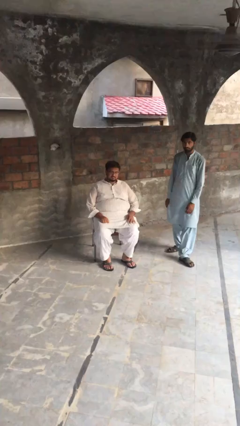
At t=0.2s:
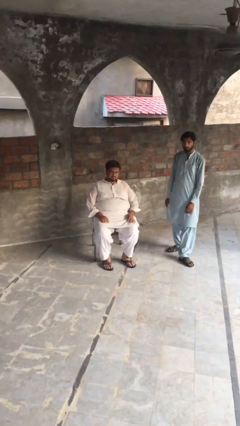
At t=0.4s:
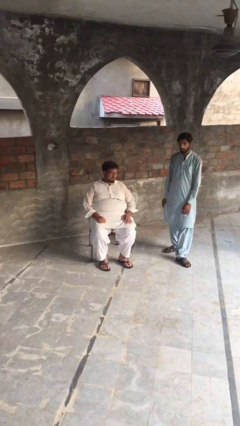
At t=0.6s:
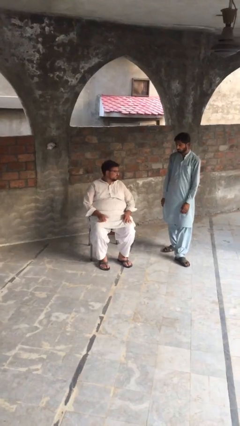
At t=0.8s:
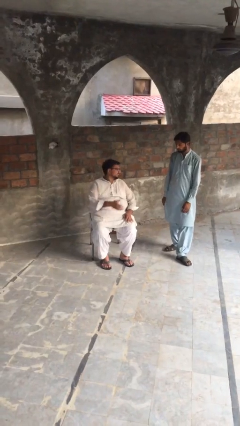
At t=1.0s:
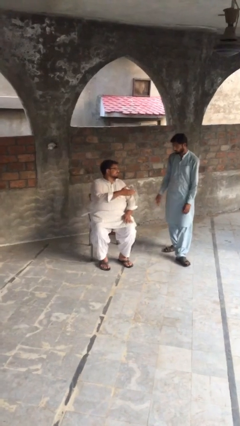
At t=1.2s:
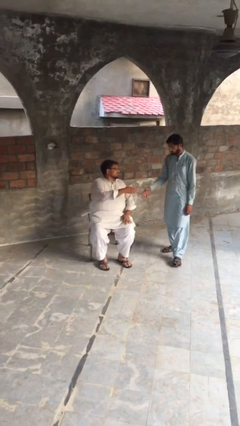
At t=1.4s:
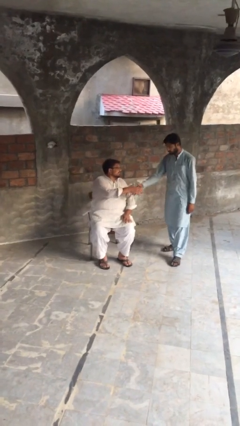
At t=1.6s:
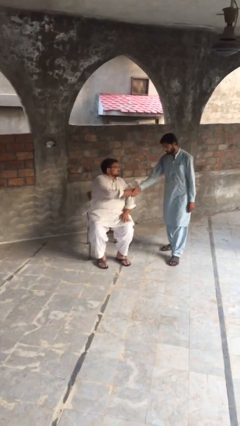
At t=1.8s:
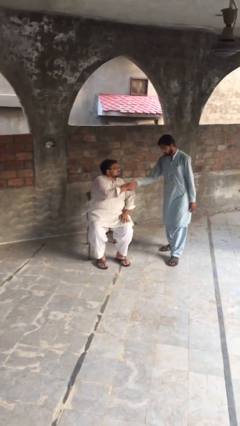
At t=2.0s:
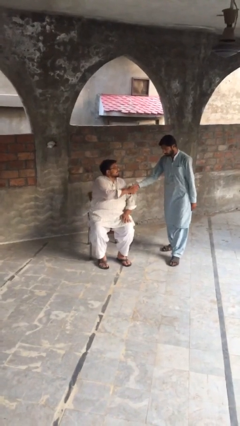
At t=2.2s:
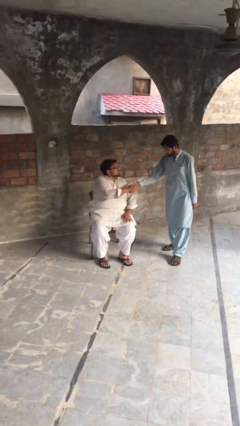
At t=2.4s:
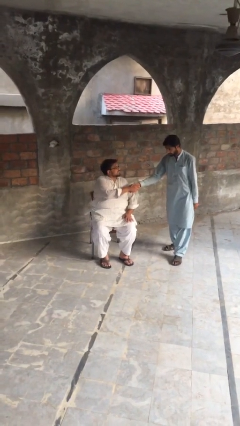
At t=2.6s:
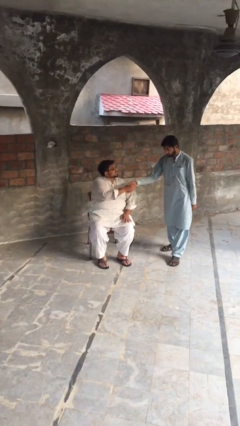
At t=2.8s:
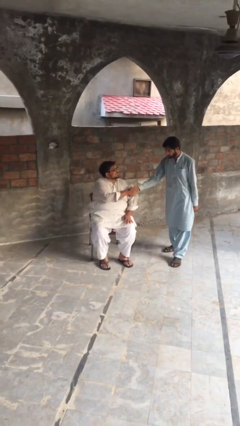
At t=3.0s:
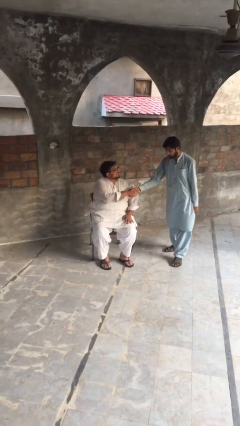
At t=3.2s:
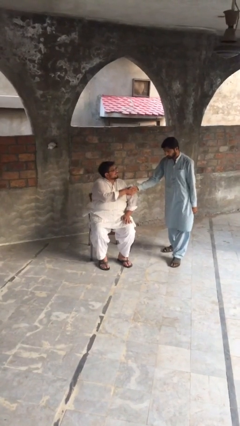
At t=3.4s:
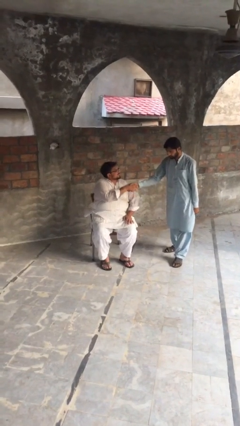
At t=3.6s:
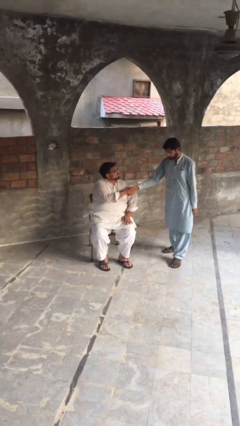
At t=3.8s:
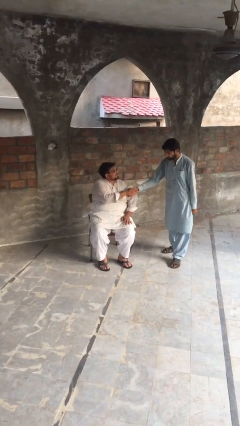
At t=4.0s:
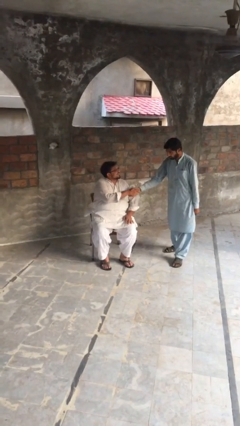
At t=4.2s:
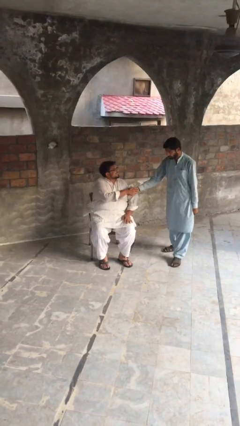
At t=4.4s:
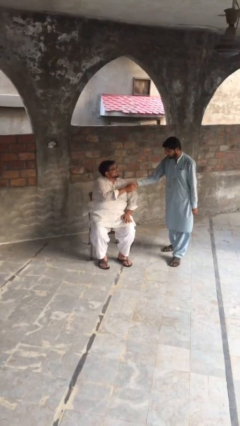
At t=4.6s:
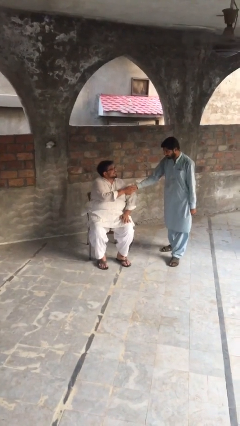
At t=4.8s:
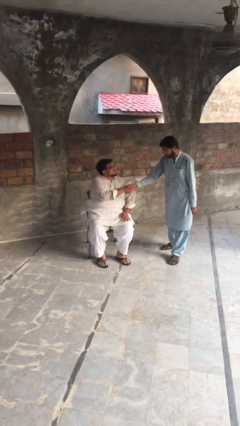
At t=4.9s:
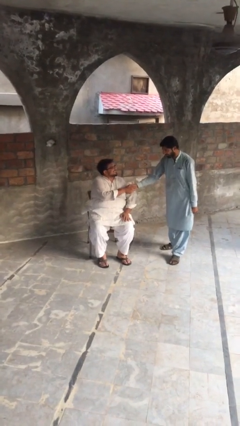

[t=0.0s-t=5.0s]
person shakes hand

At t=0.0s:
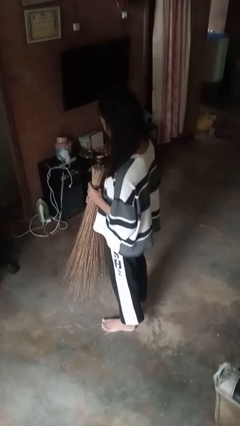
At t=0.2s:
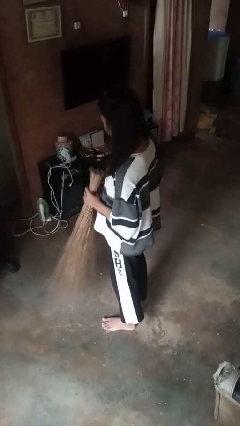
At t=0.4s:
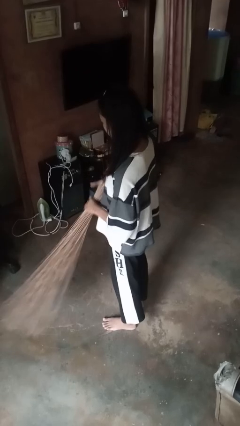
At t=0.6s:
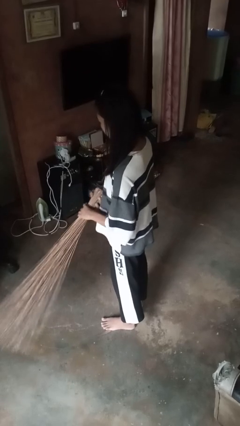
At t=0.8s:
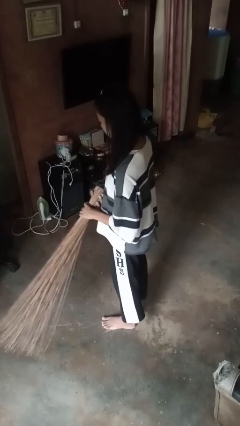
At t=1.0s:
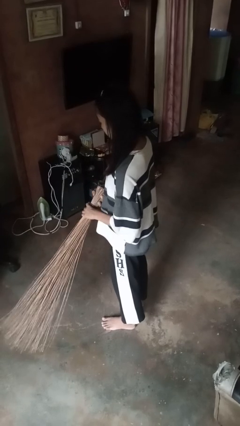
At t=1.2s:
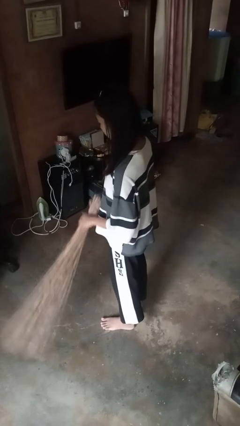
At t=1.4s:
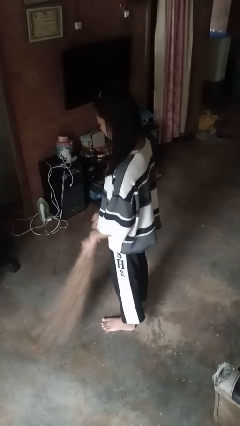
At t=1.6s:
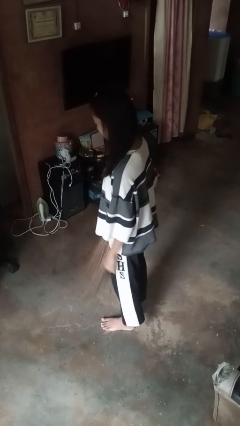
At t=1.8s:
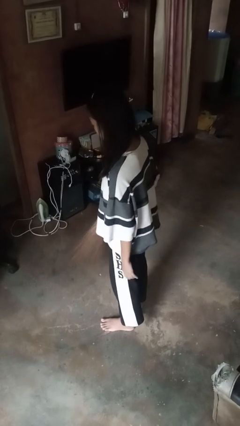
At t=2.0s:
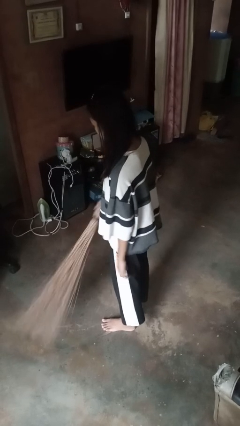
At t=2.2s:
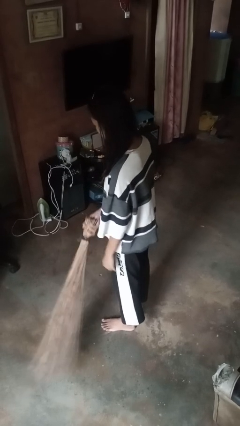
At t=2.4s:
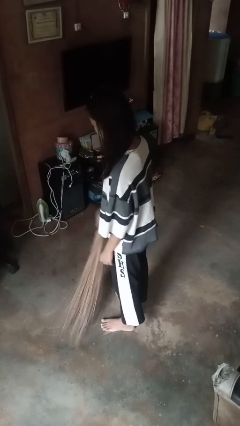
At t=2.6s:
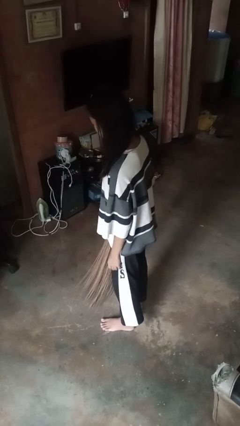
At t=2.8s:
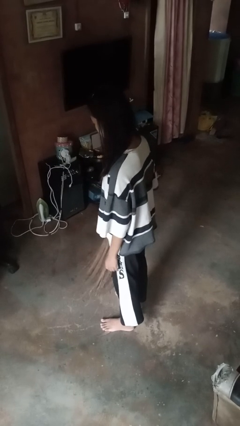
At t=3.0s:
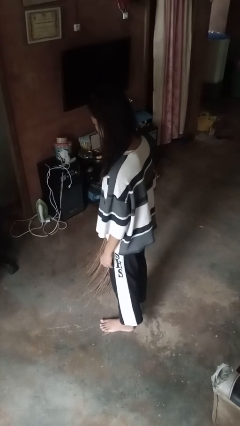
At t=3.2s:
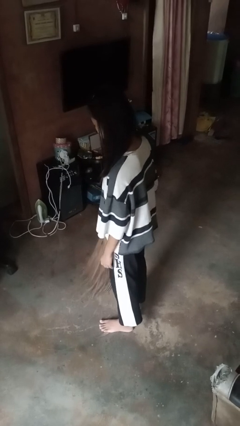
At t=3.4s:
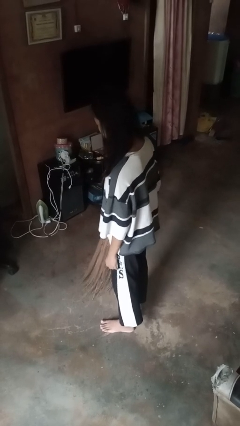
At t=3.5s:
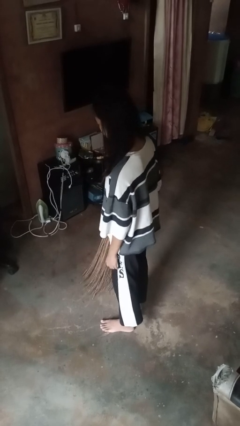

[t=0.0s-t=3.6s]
person sweeps floor

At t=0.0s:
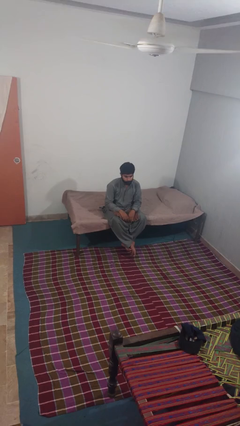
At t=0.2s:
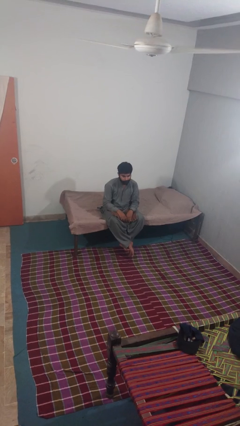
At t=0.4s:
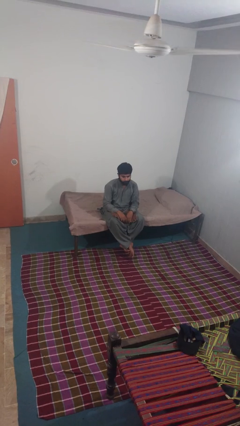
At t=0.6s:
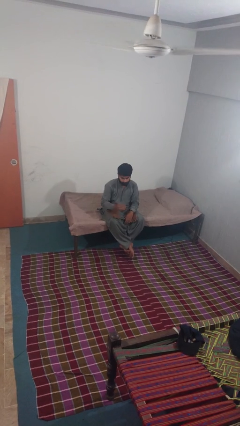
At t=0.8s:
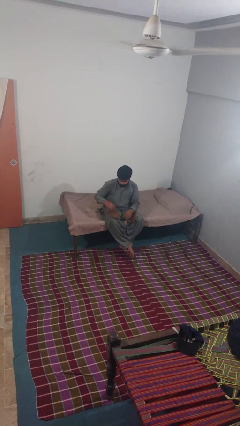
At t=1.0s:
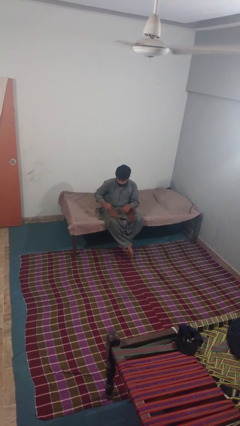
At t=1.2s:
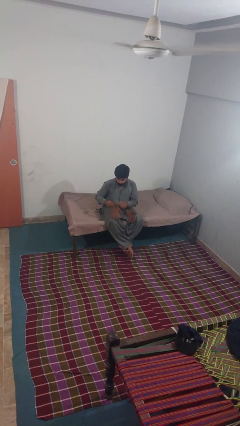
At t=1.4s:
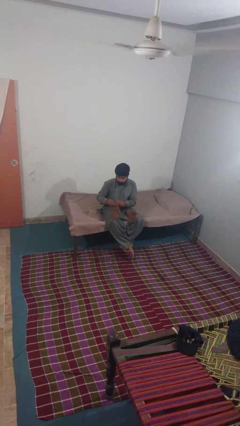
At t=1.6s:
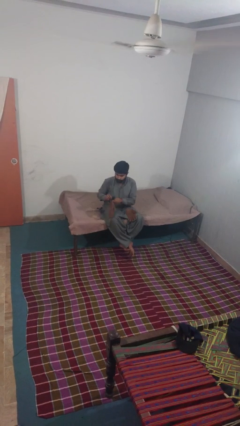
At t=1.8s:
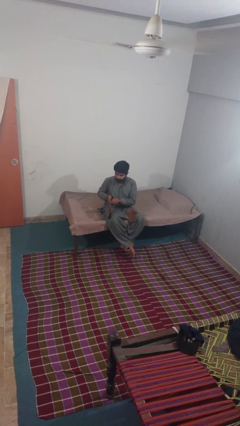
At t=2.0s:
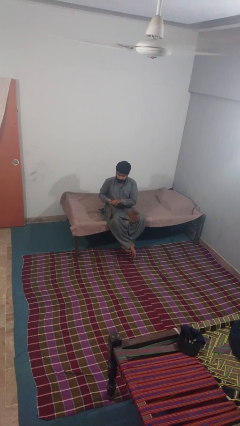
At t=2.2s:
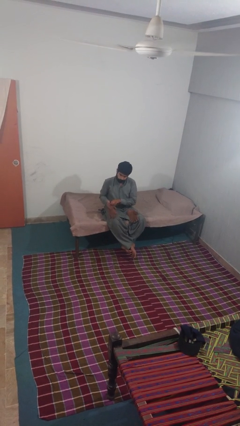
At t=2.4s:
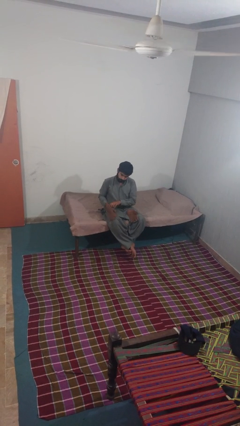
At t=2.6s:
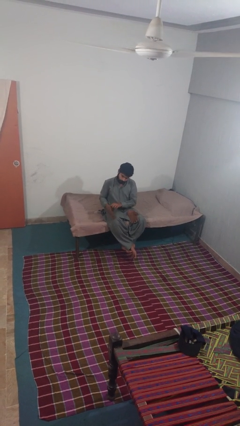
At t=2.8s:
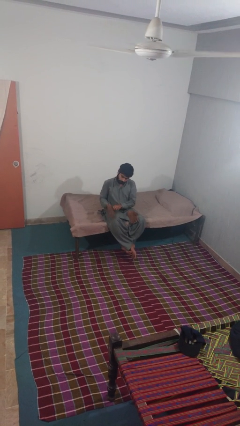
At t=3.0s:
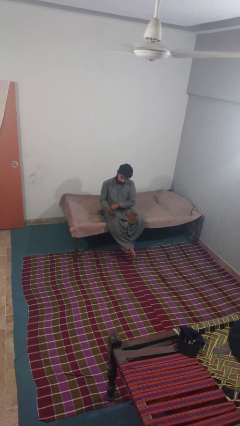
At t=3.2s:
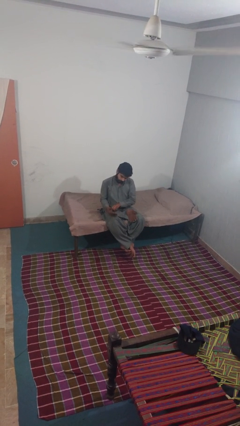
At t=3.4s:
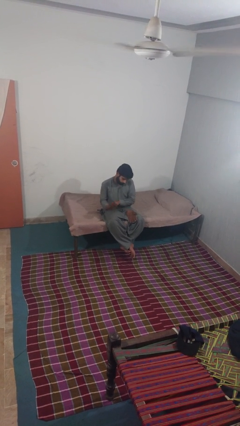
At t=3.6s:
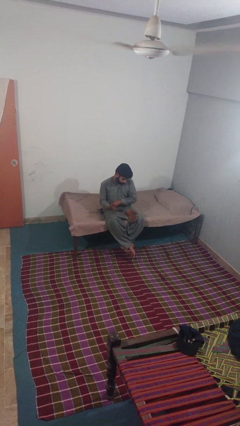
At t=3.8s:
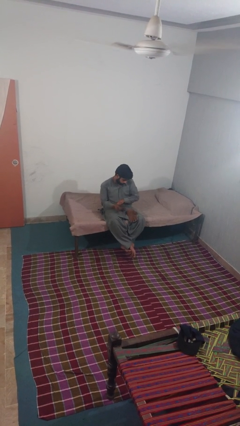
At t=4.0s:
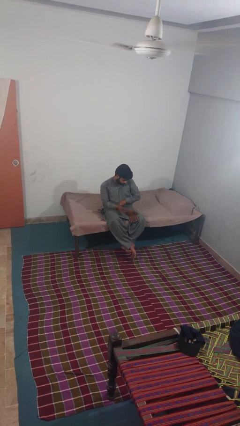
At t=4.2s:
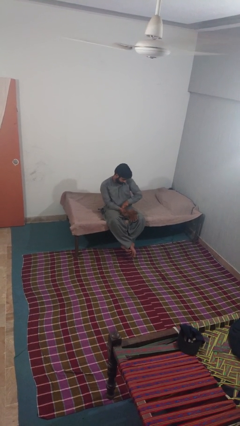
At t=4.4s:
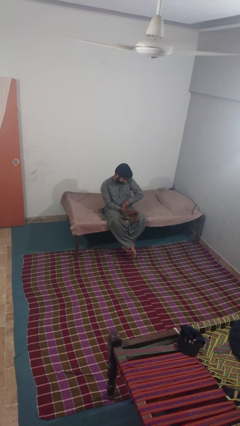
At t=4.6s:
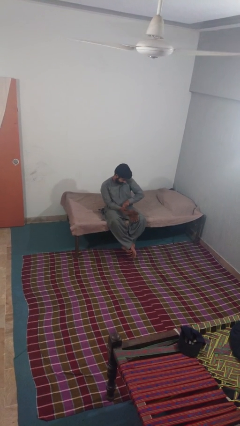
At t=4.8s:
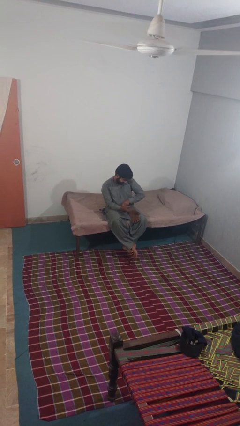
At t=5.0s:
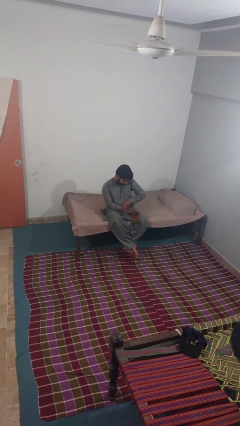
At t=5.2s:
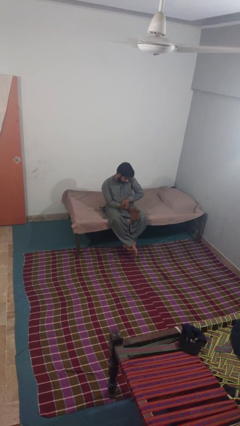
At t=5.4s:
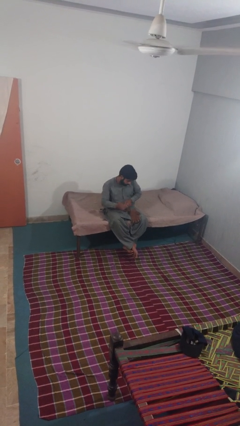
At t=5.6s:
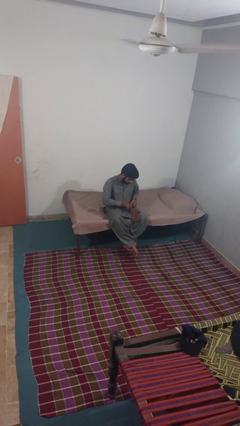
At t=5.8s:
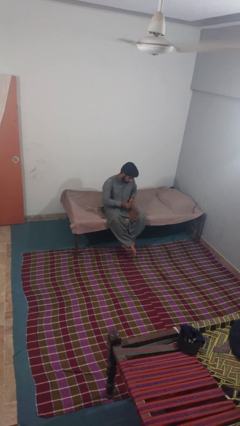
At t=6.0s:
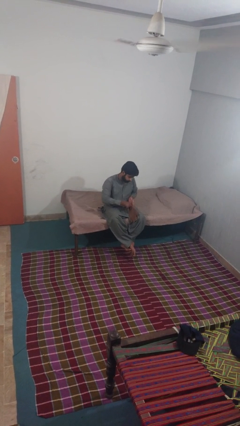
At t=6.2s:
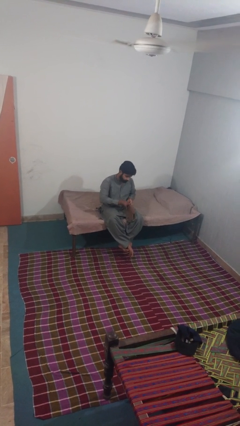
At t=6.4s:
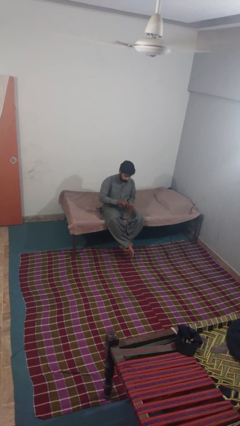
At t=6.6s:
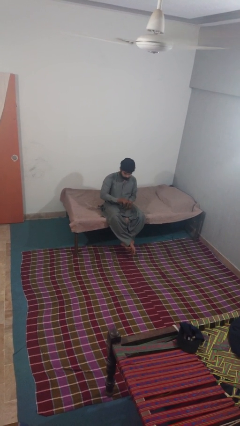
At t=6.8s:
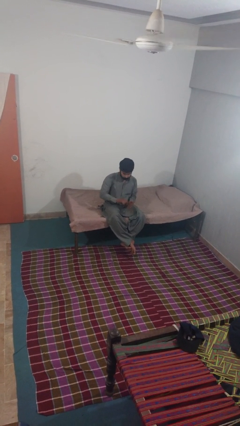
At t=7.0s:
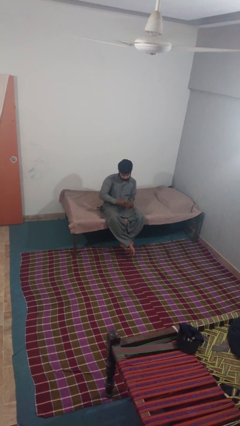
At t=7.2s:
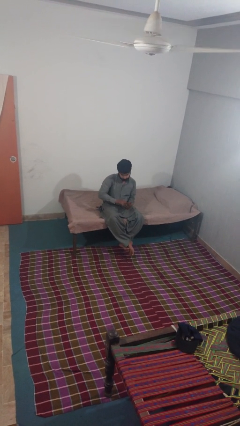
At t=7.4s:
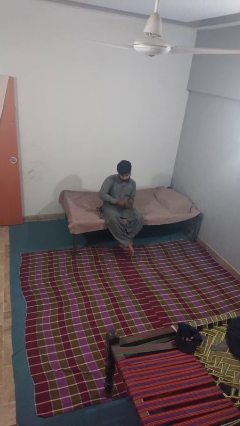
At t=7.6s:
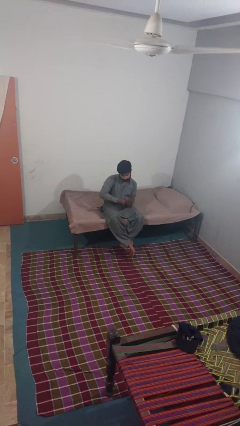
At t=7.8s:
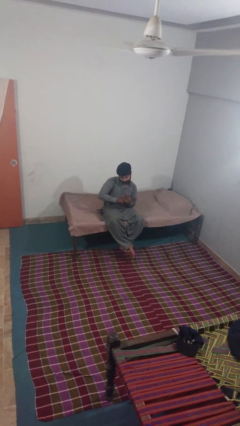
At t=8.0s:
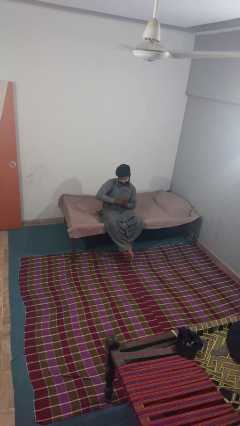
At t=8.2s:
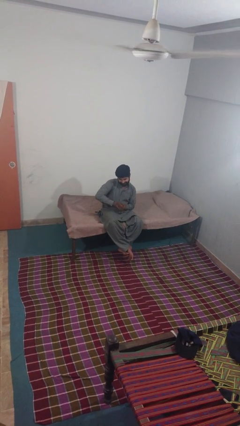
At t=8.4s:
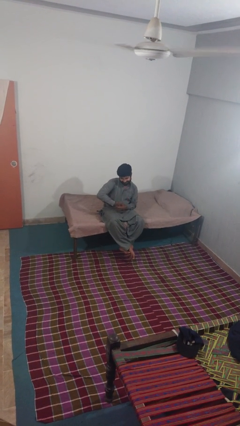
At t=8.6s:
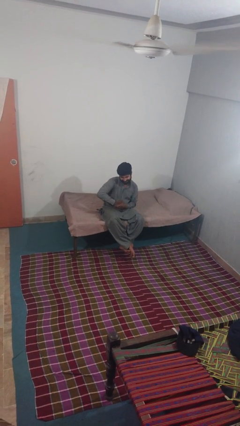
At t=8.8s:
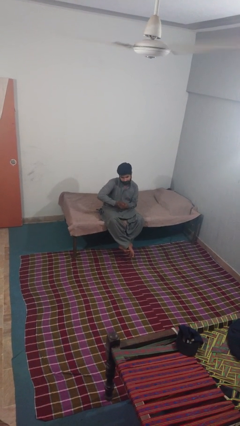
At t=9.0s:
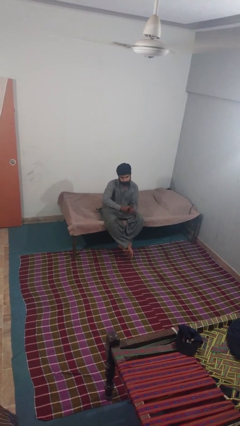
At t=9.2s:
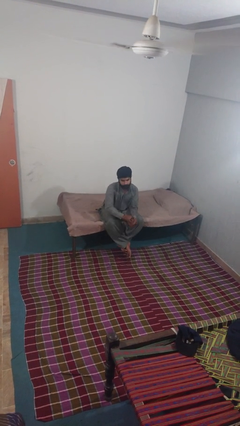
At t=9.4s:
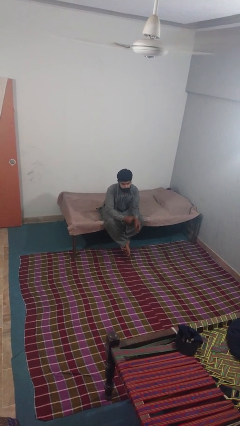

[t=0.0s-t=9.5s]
person puts on gloves
